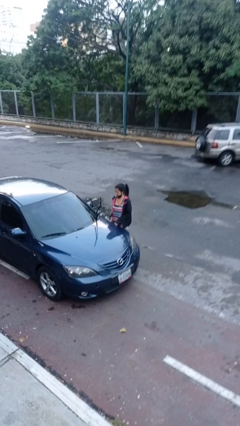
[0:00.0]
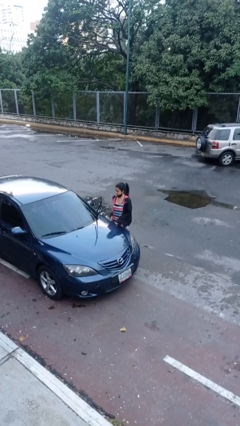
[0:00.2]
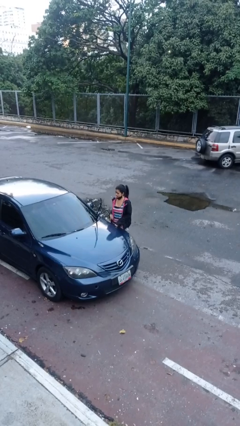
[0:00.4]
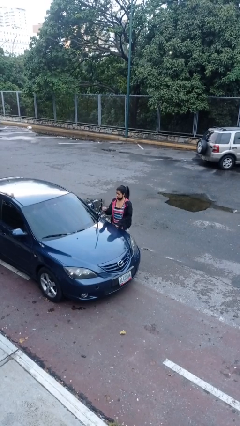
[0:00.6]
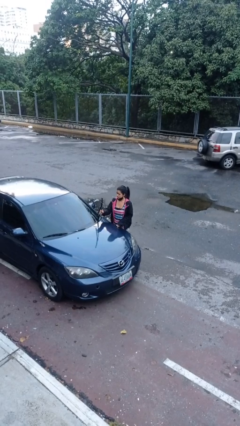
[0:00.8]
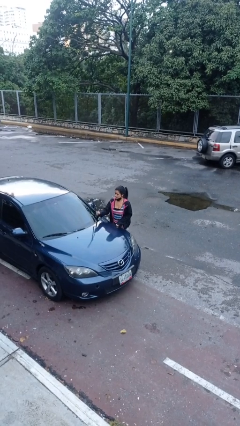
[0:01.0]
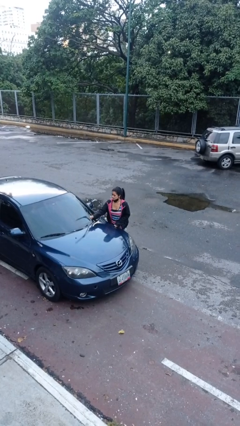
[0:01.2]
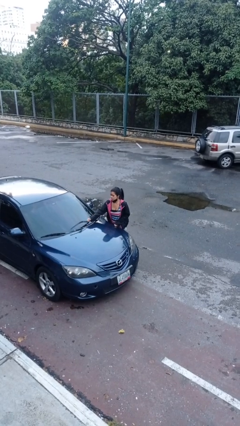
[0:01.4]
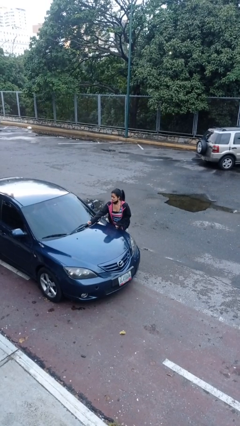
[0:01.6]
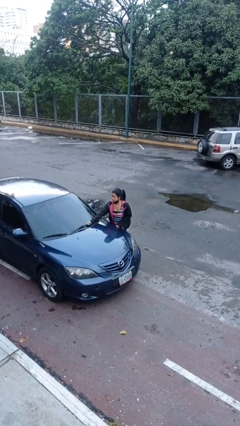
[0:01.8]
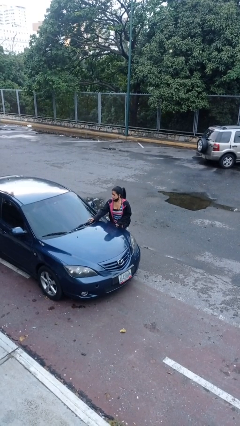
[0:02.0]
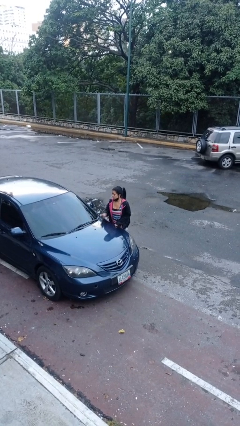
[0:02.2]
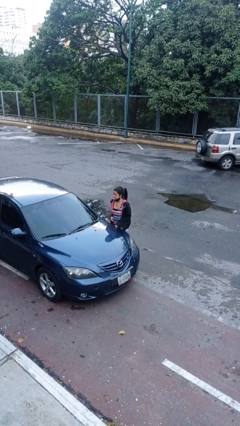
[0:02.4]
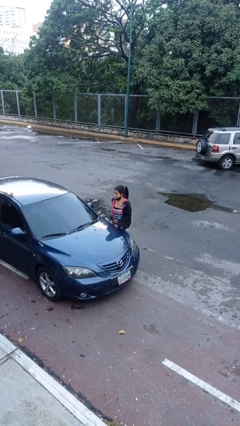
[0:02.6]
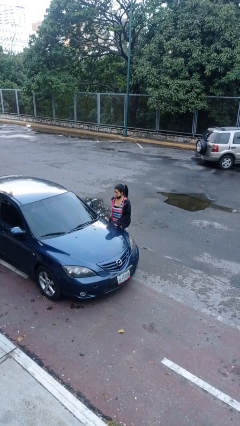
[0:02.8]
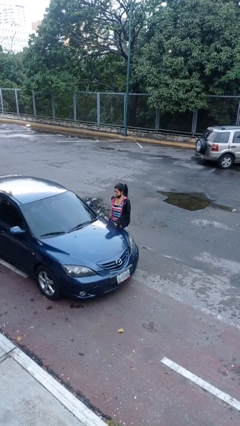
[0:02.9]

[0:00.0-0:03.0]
person flips down car wipers

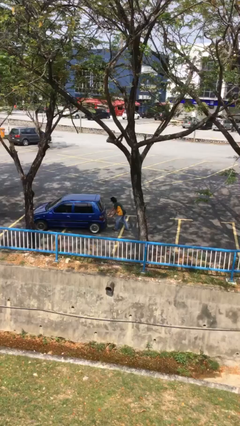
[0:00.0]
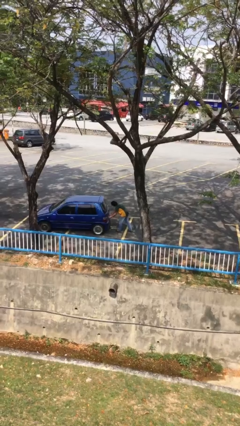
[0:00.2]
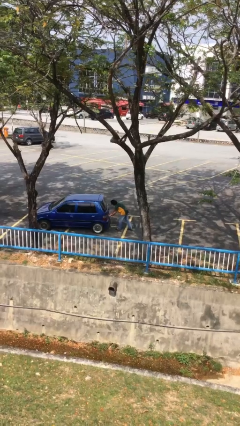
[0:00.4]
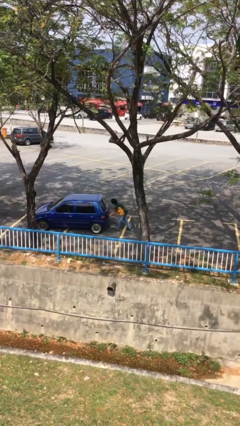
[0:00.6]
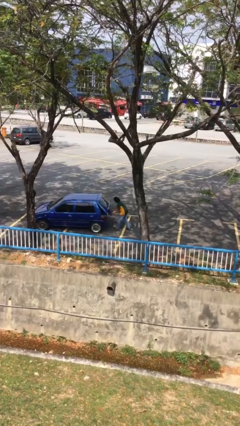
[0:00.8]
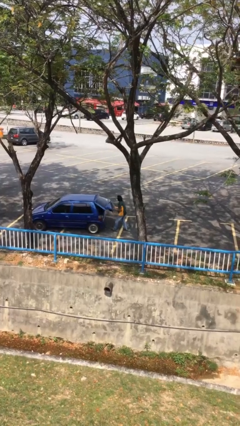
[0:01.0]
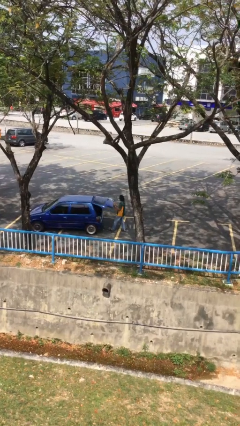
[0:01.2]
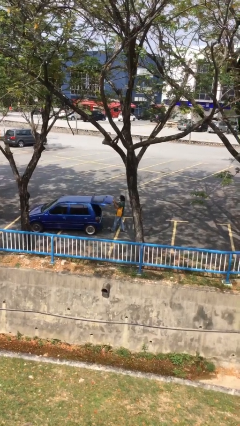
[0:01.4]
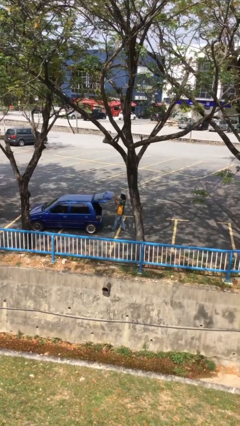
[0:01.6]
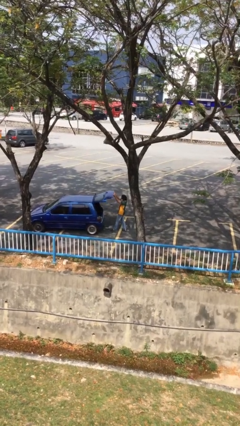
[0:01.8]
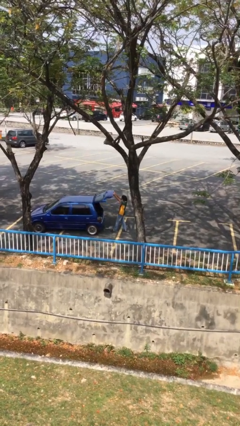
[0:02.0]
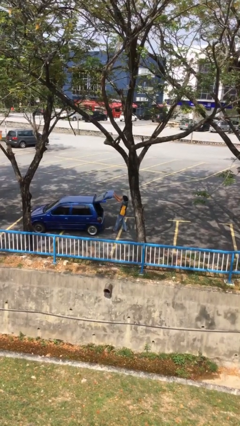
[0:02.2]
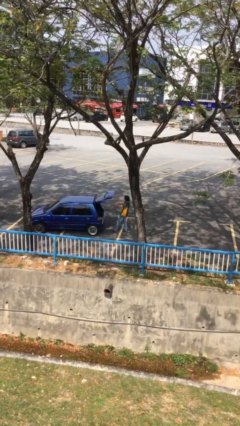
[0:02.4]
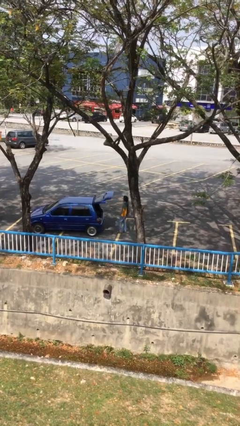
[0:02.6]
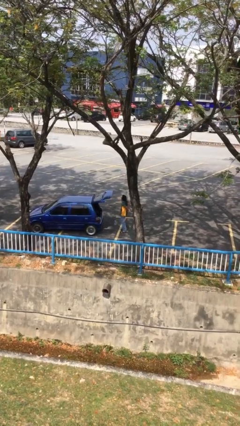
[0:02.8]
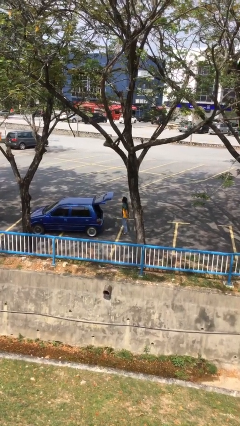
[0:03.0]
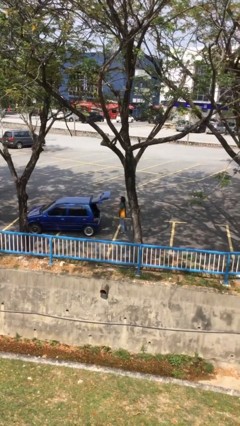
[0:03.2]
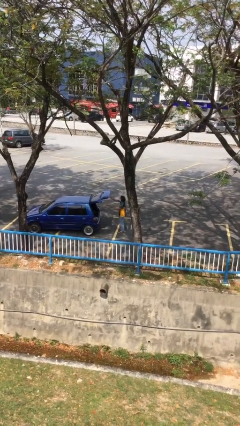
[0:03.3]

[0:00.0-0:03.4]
person opens car trunk

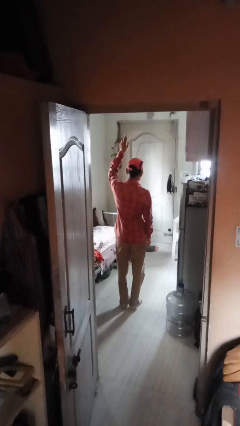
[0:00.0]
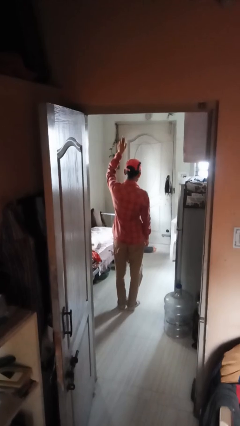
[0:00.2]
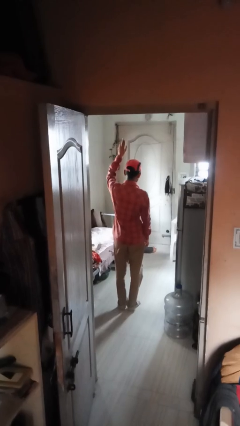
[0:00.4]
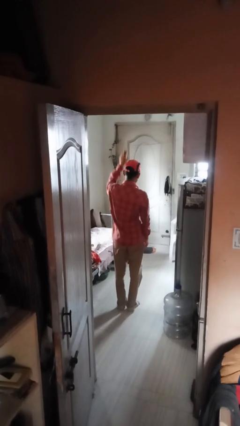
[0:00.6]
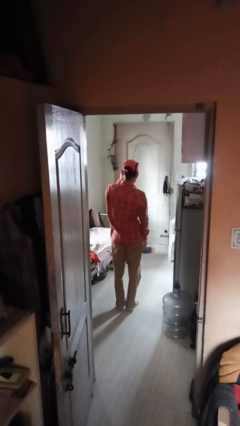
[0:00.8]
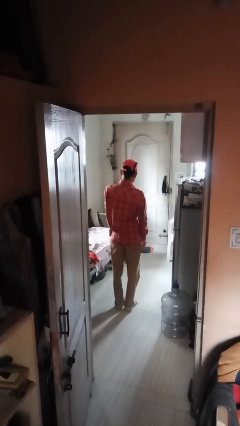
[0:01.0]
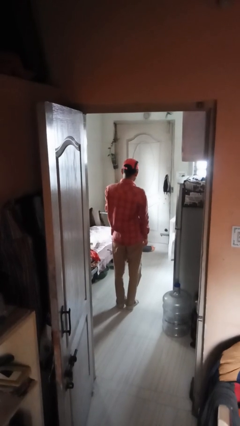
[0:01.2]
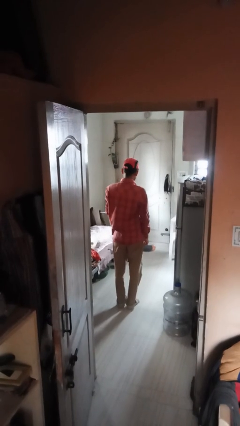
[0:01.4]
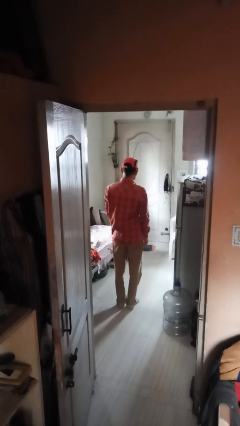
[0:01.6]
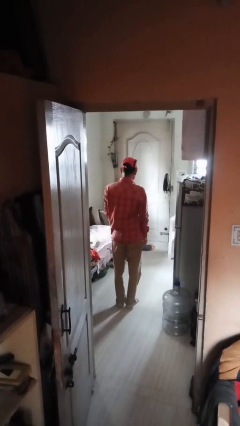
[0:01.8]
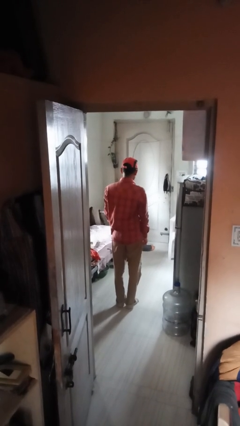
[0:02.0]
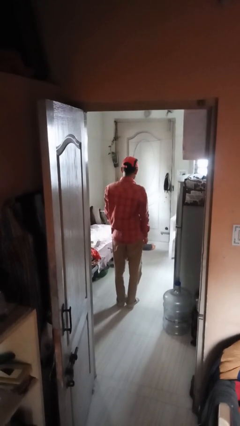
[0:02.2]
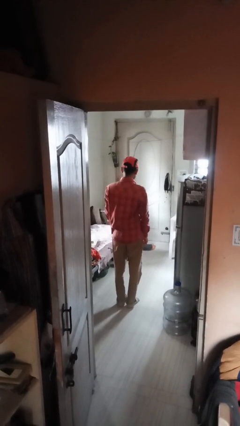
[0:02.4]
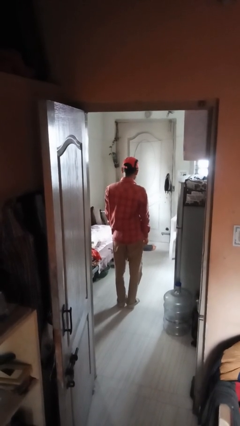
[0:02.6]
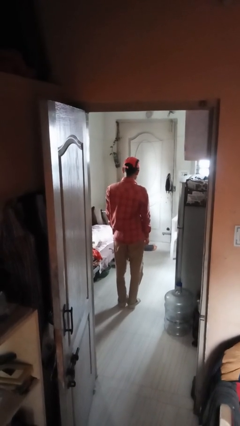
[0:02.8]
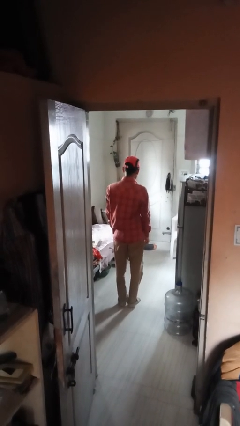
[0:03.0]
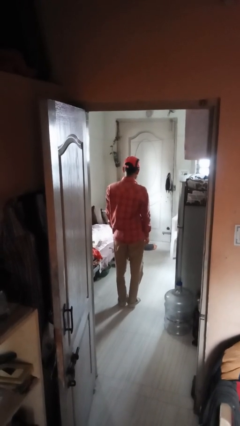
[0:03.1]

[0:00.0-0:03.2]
person gestures swipe down

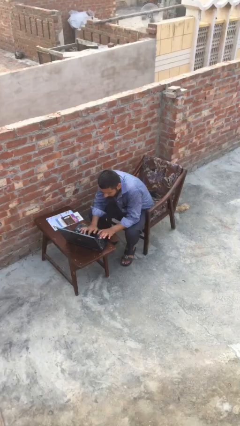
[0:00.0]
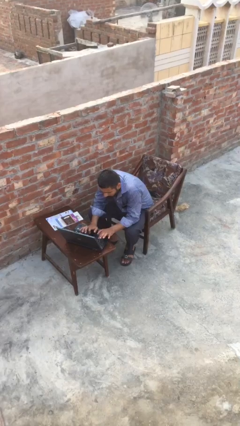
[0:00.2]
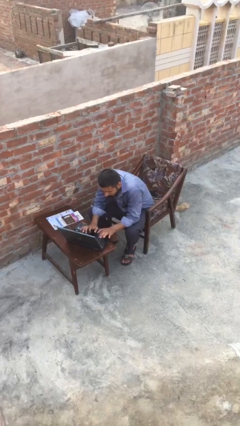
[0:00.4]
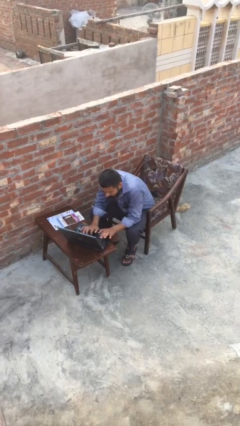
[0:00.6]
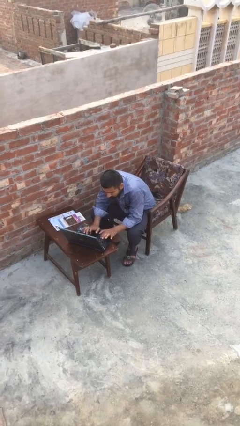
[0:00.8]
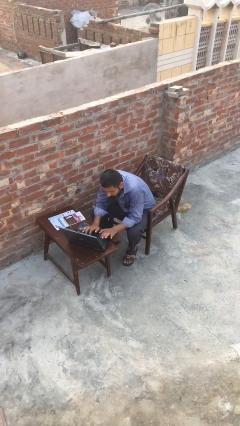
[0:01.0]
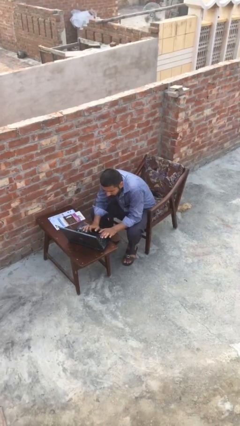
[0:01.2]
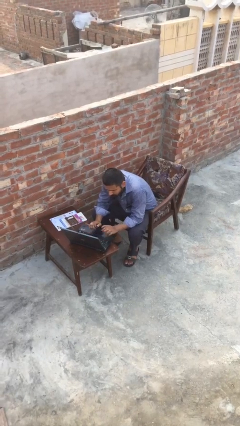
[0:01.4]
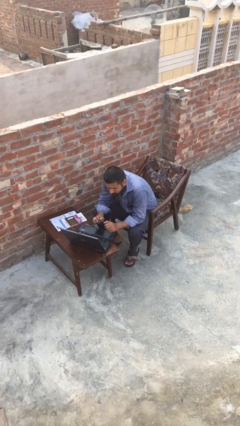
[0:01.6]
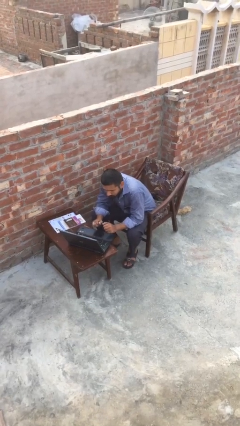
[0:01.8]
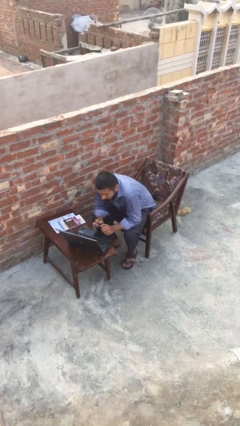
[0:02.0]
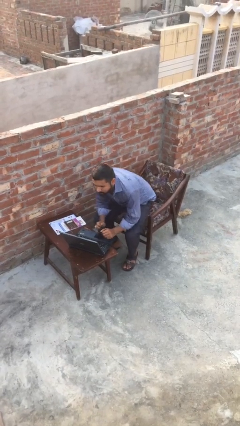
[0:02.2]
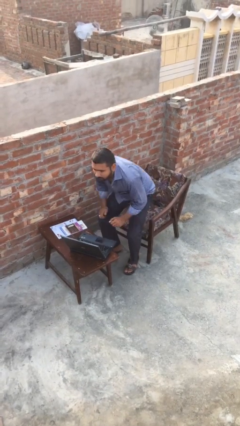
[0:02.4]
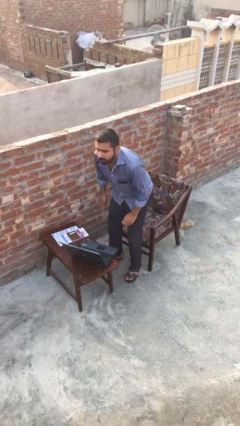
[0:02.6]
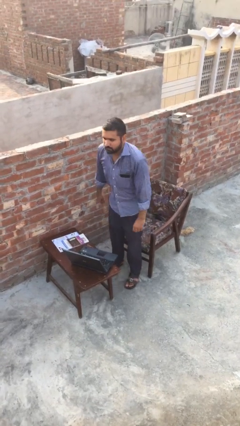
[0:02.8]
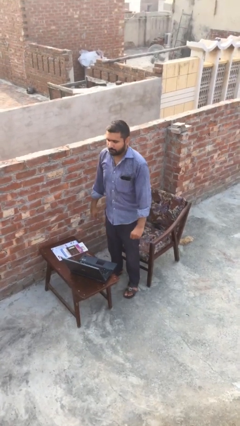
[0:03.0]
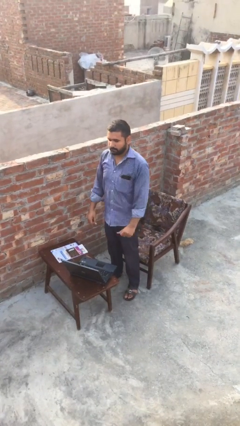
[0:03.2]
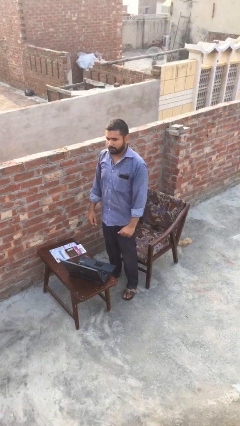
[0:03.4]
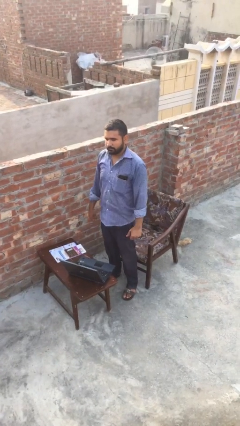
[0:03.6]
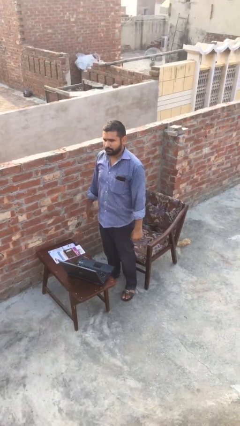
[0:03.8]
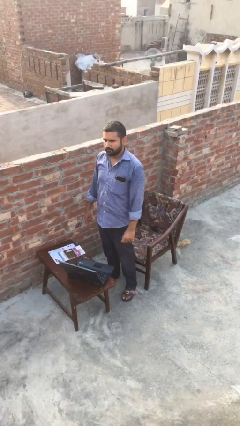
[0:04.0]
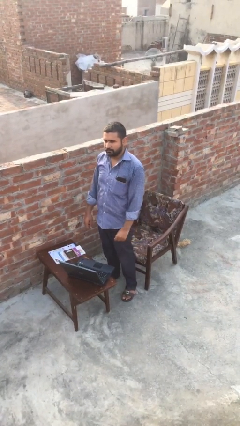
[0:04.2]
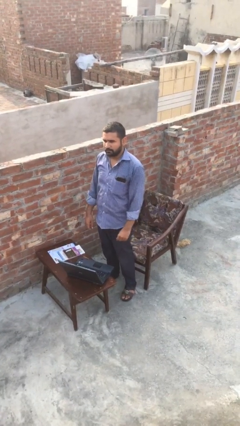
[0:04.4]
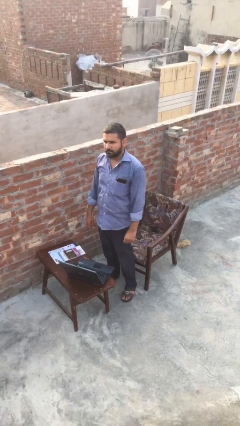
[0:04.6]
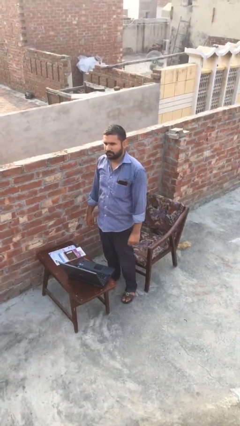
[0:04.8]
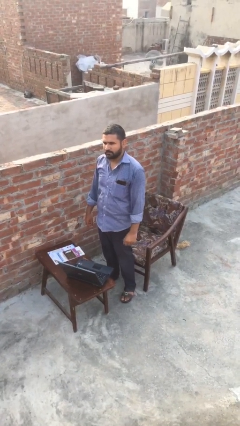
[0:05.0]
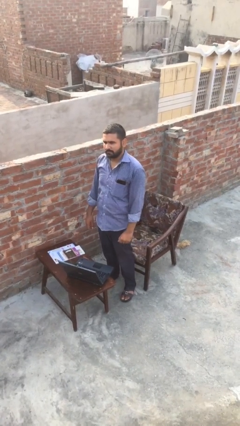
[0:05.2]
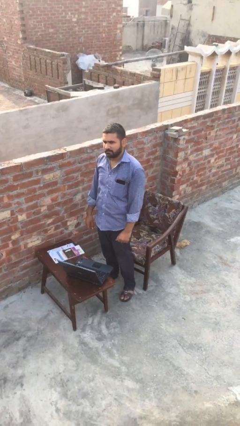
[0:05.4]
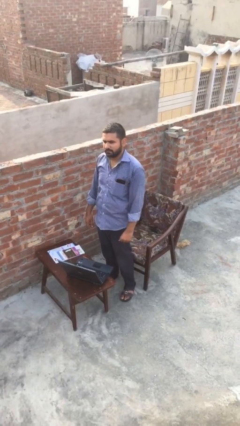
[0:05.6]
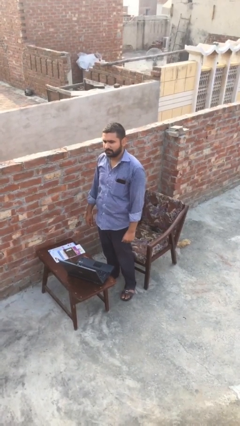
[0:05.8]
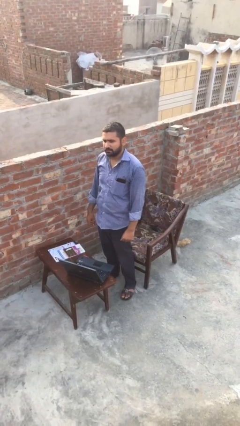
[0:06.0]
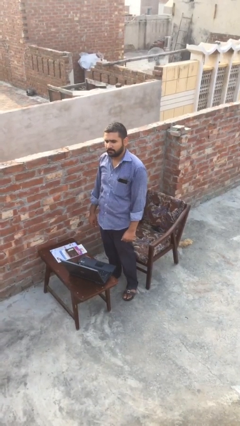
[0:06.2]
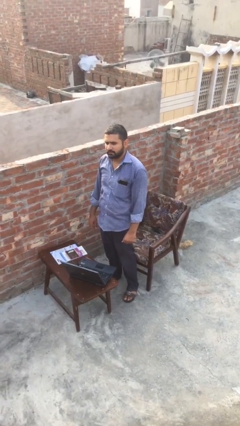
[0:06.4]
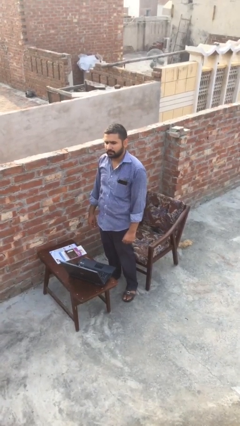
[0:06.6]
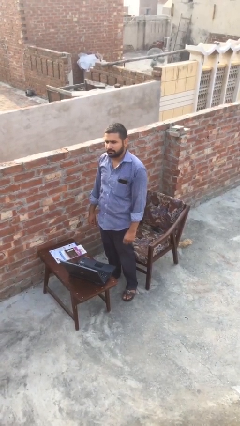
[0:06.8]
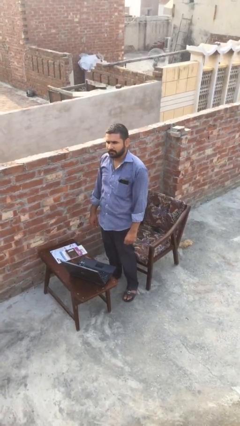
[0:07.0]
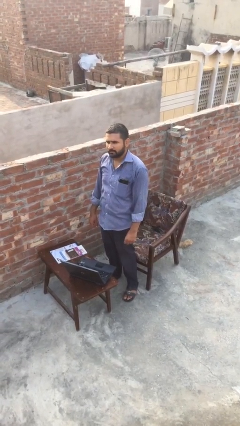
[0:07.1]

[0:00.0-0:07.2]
person stands up

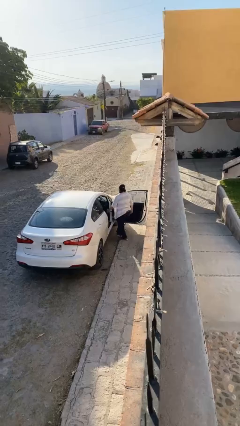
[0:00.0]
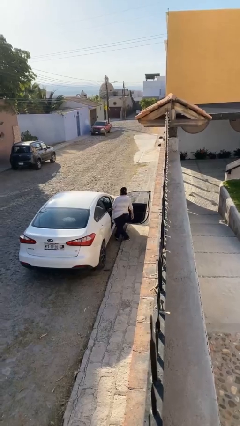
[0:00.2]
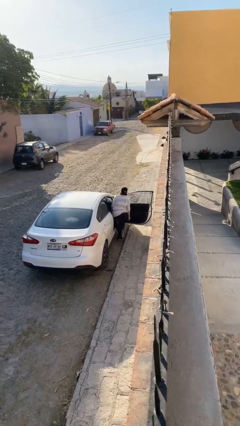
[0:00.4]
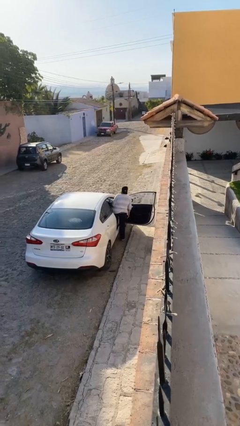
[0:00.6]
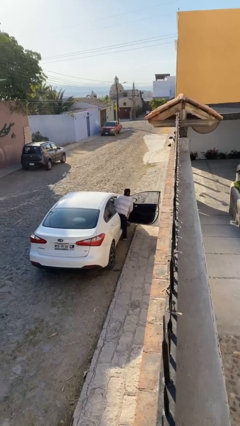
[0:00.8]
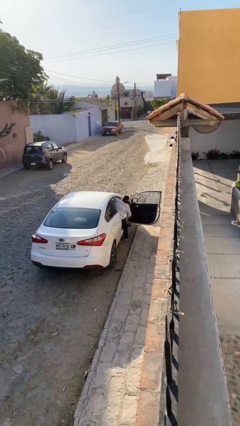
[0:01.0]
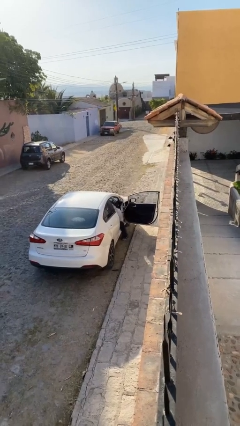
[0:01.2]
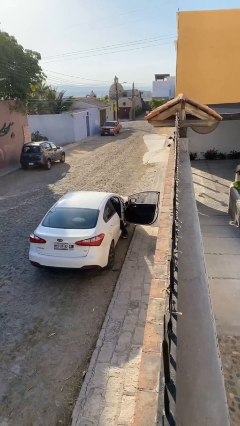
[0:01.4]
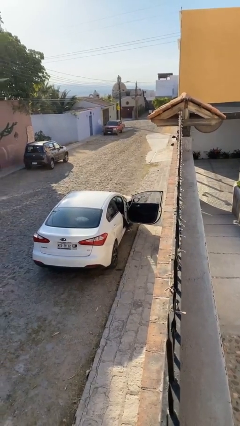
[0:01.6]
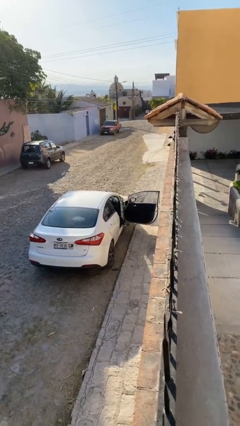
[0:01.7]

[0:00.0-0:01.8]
person enters car
